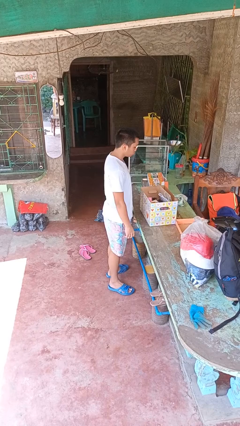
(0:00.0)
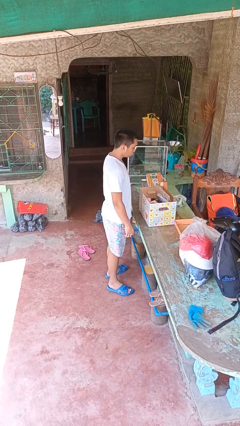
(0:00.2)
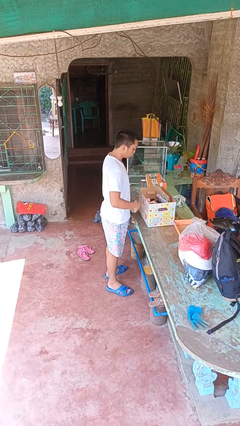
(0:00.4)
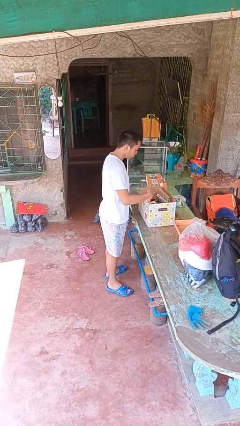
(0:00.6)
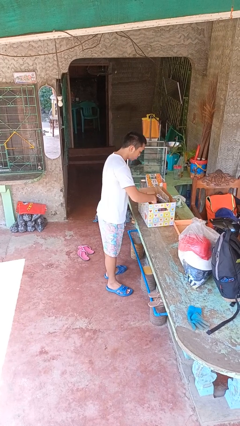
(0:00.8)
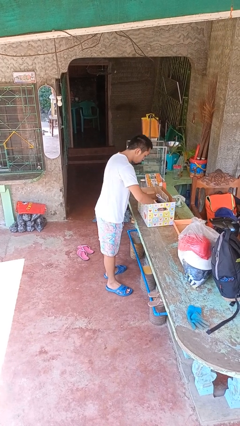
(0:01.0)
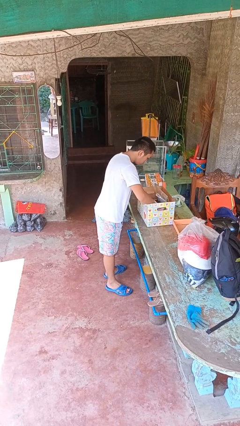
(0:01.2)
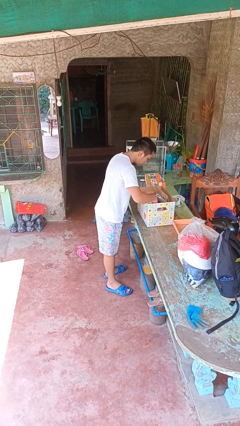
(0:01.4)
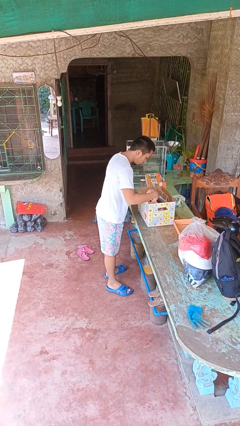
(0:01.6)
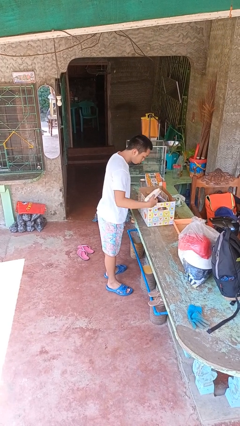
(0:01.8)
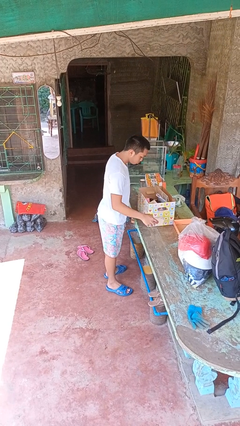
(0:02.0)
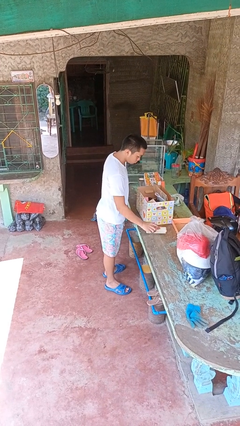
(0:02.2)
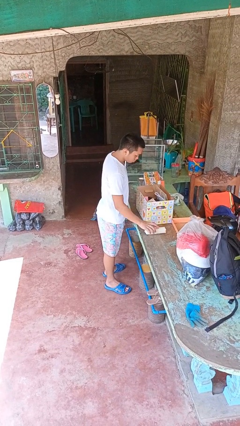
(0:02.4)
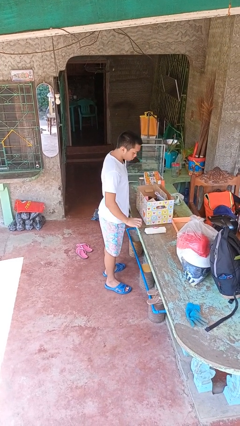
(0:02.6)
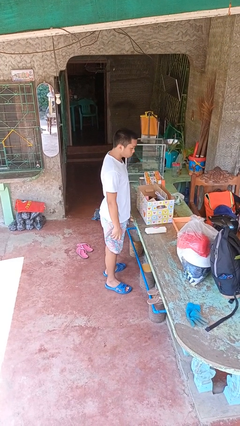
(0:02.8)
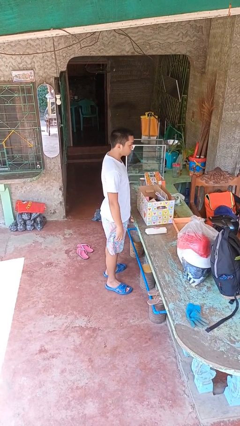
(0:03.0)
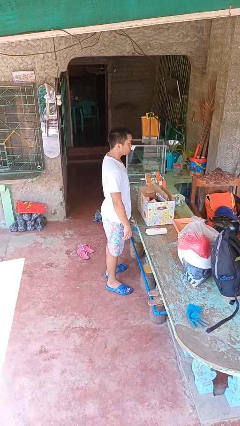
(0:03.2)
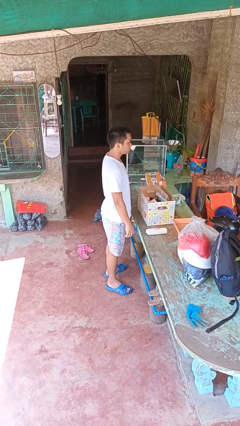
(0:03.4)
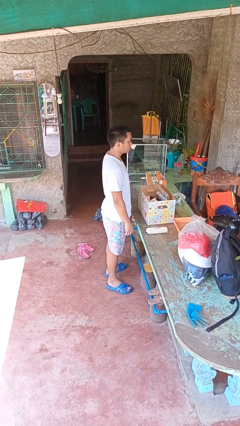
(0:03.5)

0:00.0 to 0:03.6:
person takes object from box

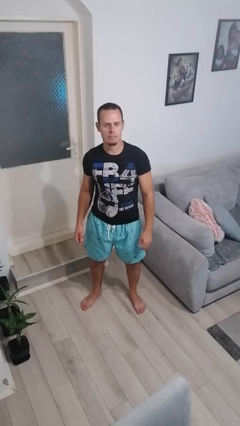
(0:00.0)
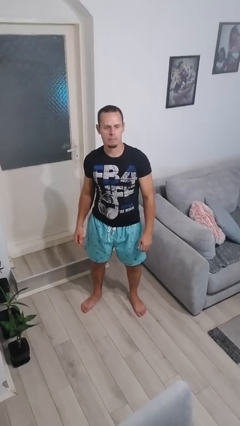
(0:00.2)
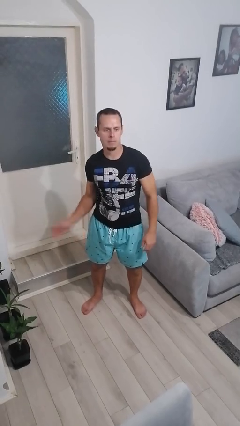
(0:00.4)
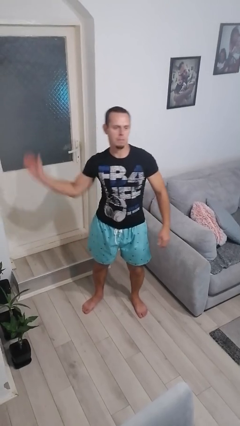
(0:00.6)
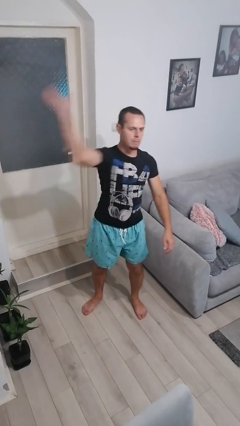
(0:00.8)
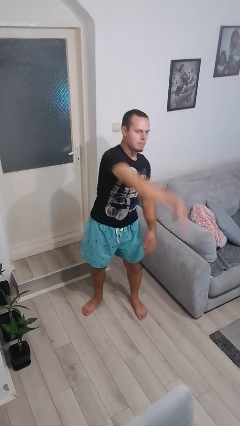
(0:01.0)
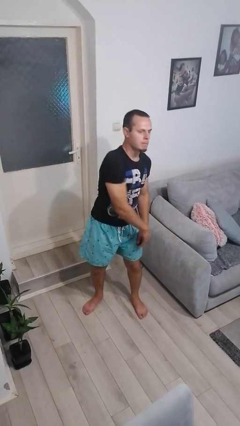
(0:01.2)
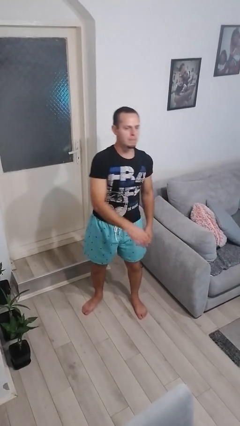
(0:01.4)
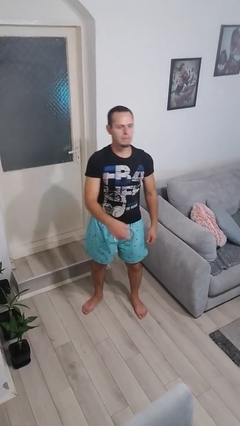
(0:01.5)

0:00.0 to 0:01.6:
person punches

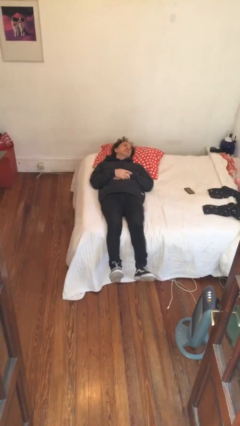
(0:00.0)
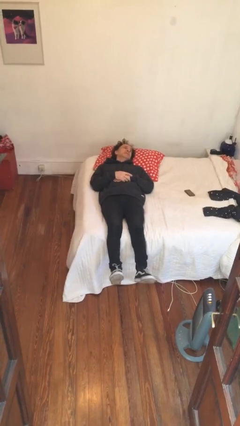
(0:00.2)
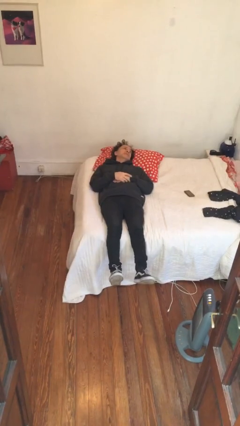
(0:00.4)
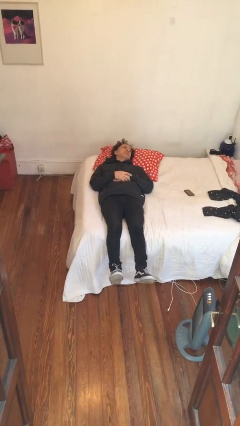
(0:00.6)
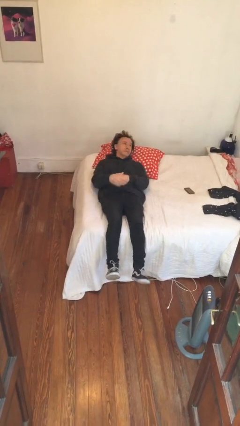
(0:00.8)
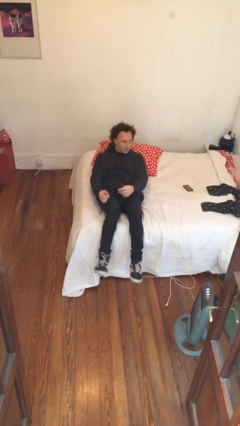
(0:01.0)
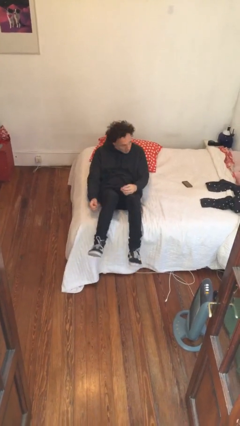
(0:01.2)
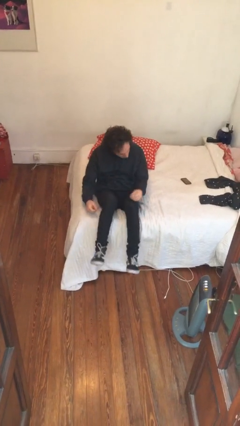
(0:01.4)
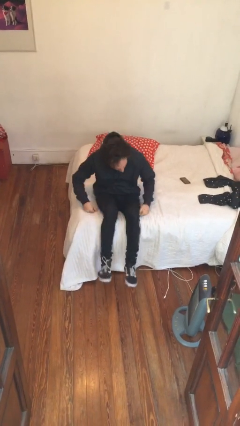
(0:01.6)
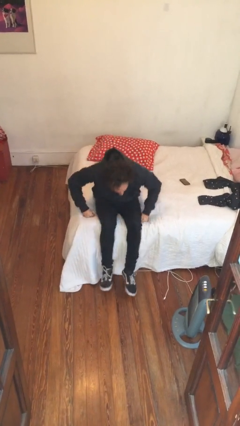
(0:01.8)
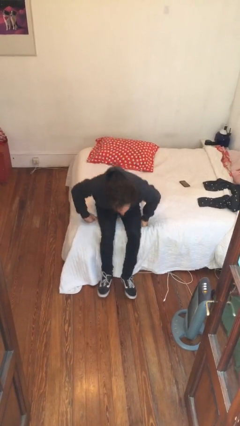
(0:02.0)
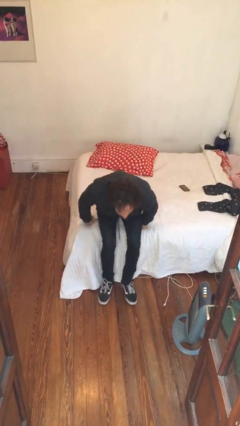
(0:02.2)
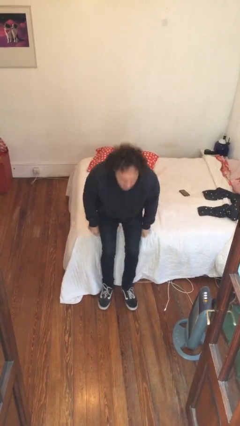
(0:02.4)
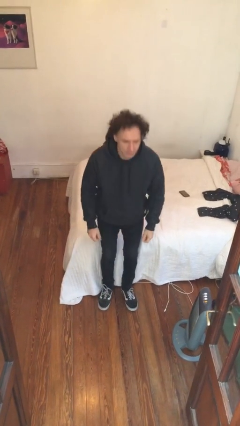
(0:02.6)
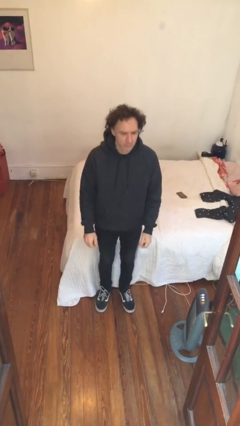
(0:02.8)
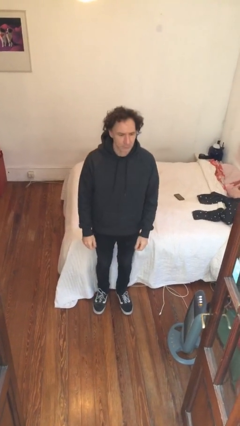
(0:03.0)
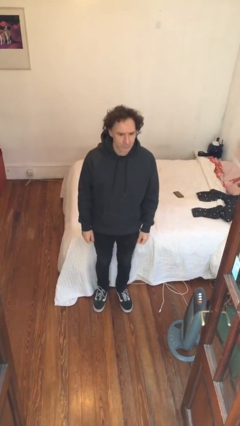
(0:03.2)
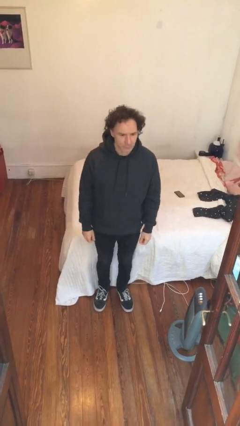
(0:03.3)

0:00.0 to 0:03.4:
person stands up

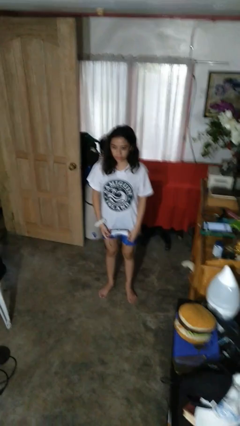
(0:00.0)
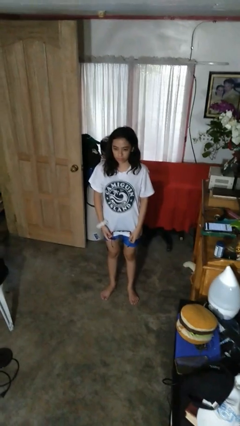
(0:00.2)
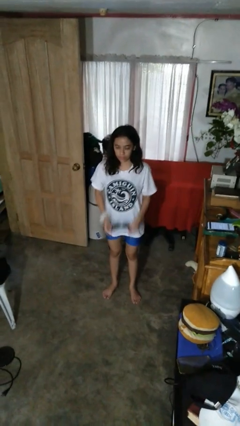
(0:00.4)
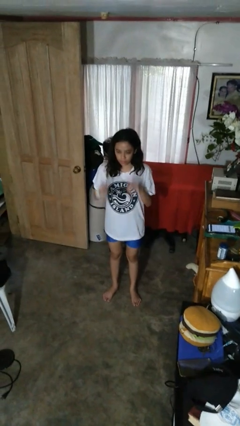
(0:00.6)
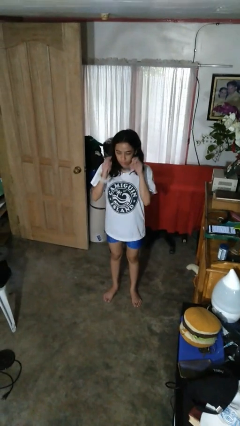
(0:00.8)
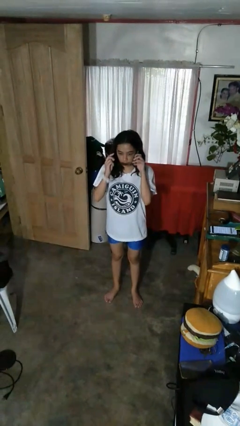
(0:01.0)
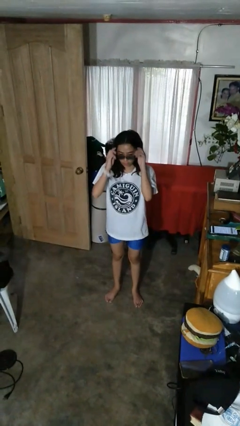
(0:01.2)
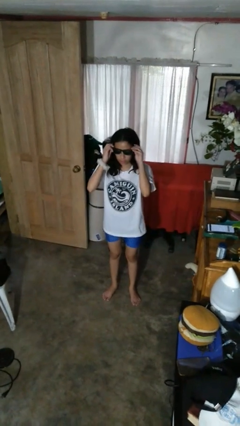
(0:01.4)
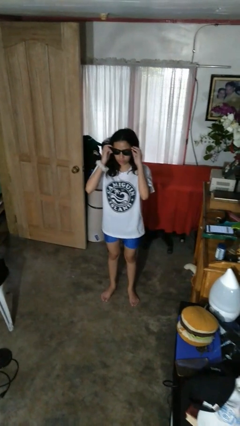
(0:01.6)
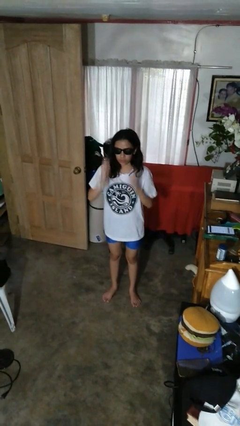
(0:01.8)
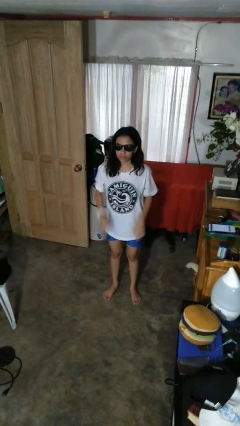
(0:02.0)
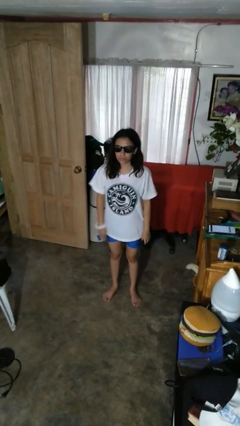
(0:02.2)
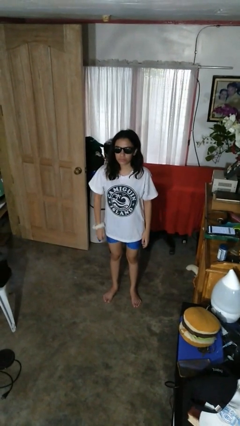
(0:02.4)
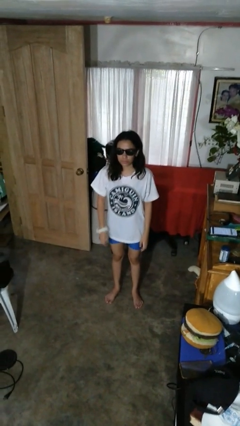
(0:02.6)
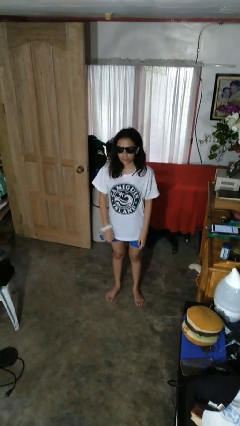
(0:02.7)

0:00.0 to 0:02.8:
person puts on sunglasses

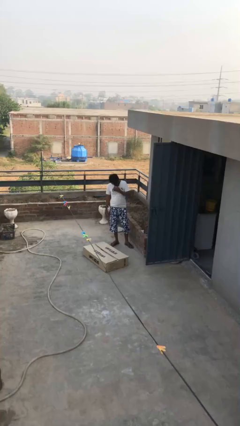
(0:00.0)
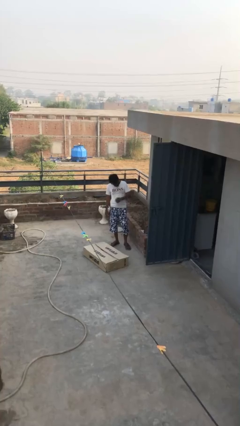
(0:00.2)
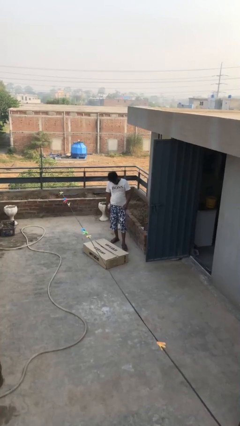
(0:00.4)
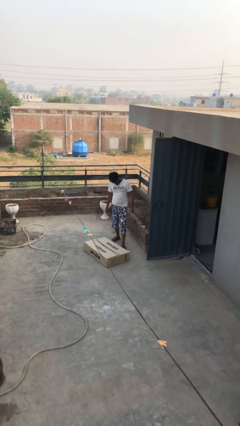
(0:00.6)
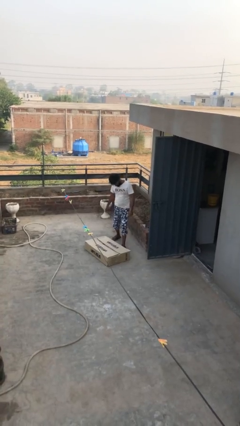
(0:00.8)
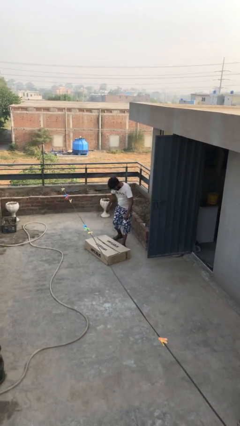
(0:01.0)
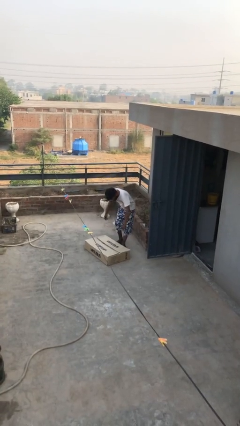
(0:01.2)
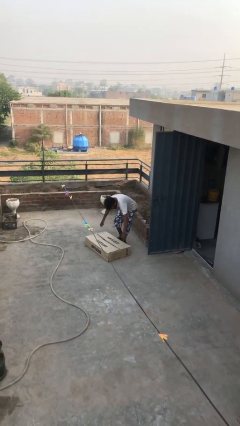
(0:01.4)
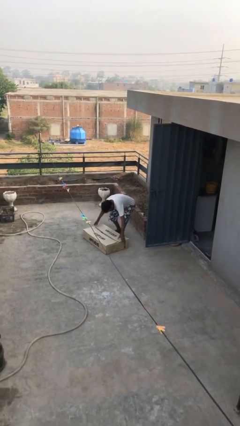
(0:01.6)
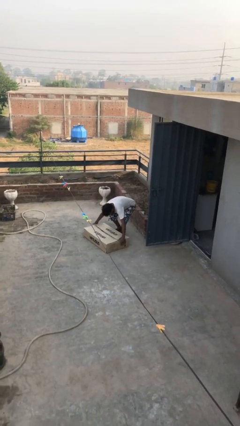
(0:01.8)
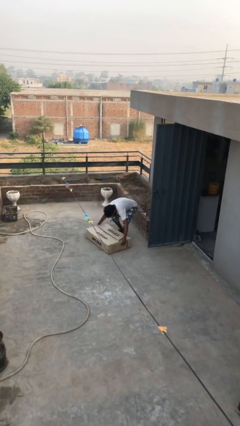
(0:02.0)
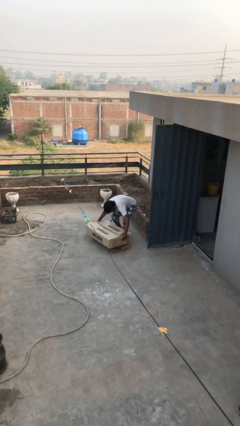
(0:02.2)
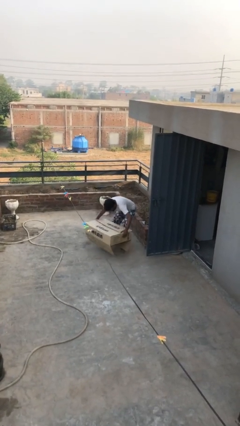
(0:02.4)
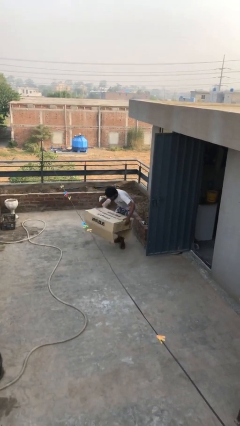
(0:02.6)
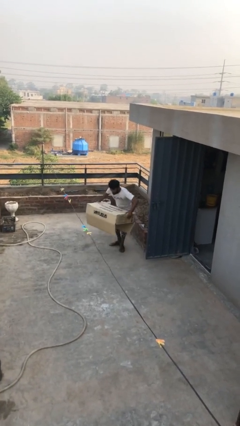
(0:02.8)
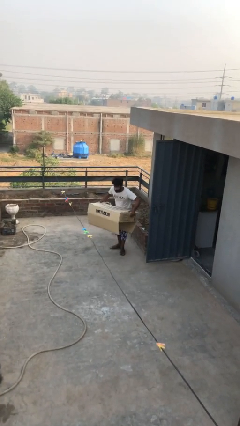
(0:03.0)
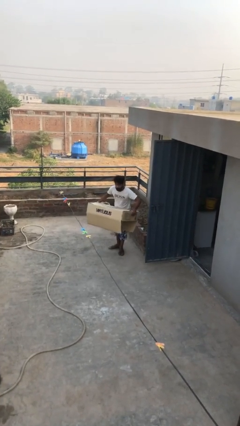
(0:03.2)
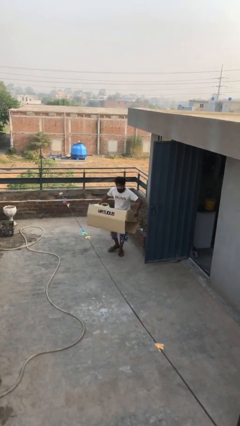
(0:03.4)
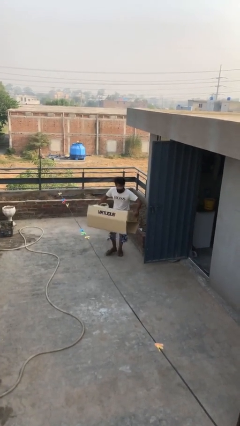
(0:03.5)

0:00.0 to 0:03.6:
person picks up object from floor

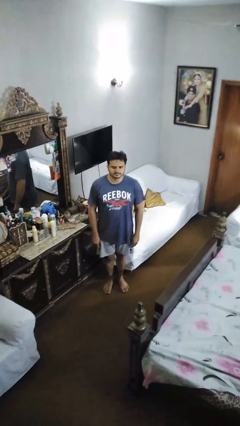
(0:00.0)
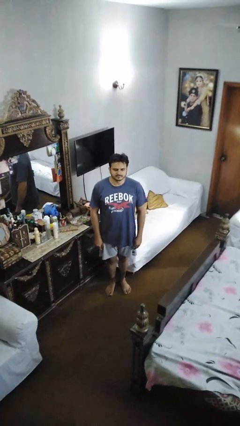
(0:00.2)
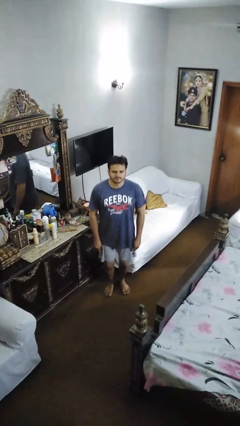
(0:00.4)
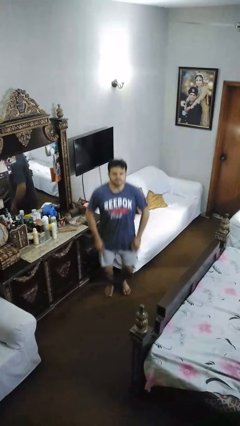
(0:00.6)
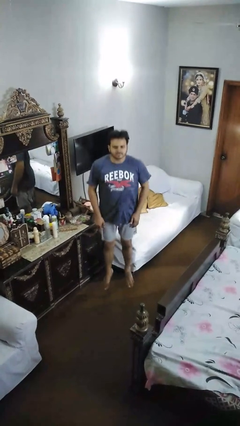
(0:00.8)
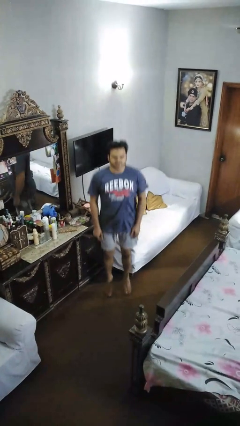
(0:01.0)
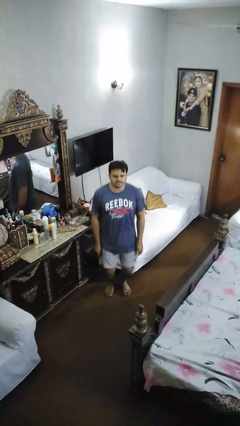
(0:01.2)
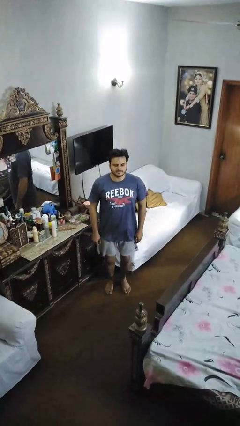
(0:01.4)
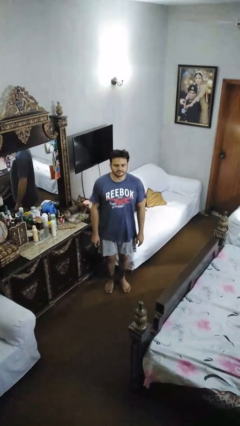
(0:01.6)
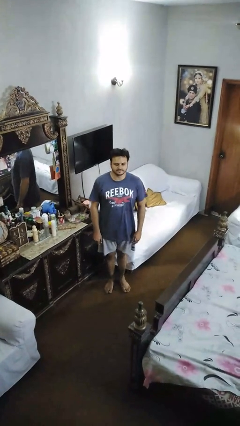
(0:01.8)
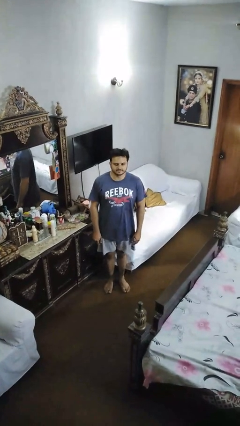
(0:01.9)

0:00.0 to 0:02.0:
person jumps

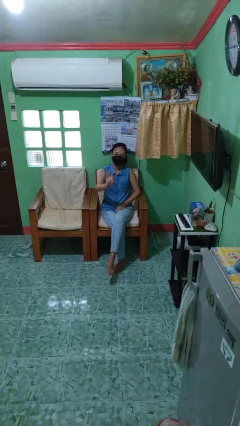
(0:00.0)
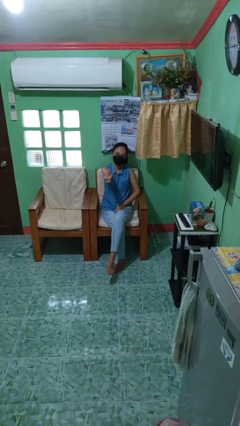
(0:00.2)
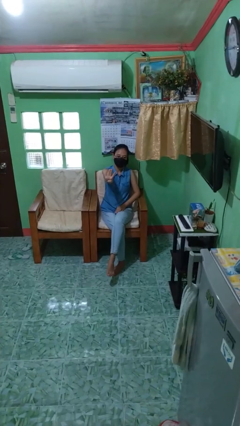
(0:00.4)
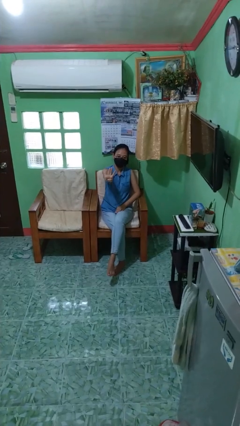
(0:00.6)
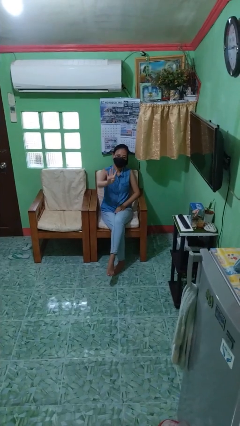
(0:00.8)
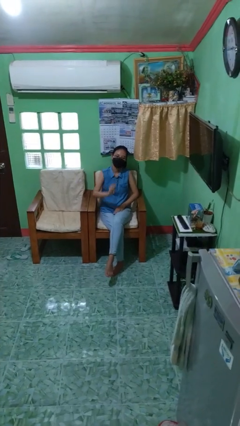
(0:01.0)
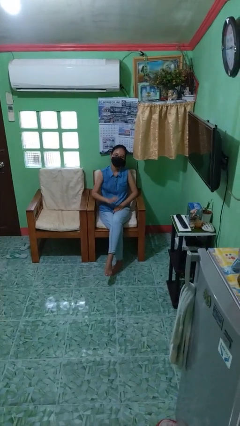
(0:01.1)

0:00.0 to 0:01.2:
person gestures number four
